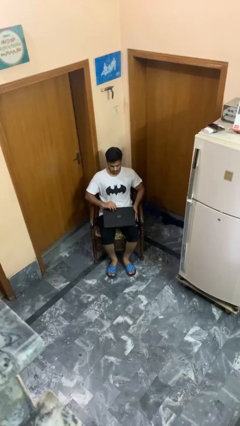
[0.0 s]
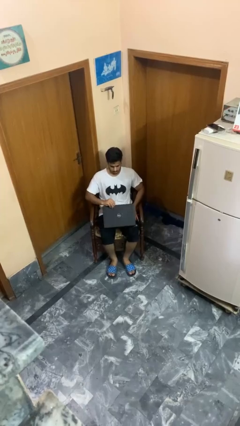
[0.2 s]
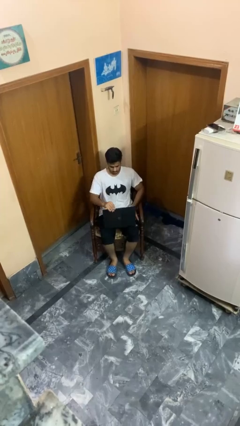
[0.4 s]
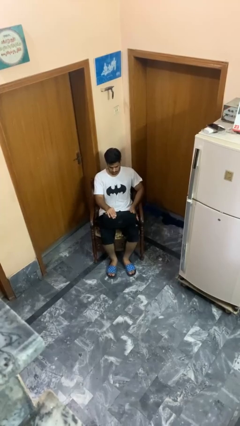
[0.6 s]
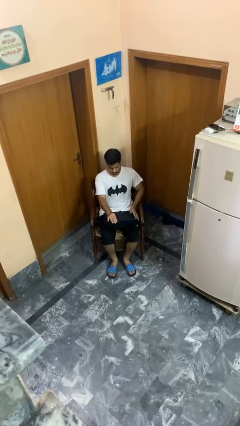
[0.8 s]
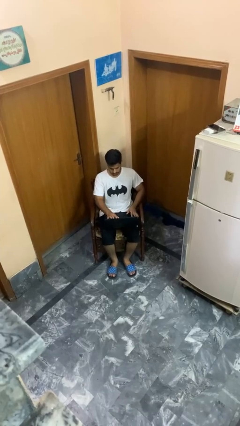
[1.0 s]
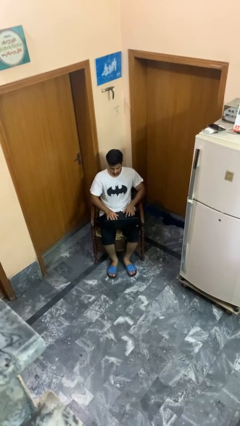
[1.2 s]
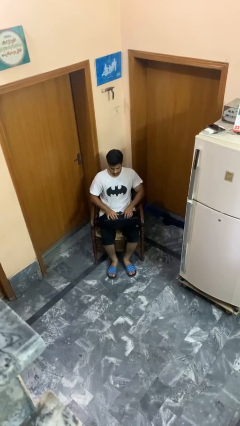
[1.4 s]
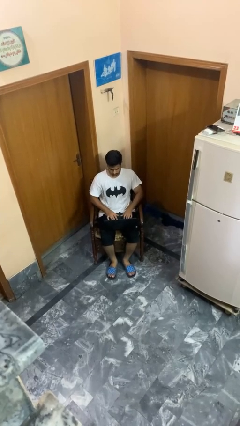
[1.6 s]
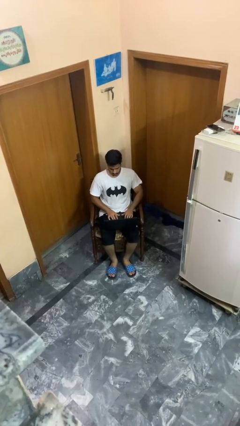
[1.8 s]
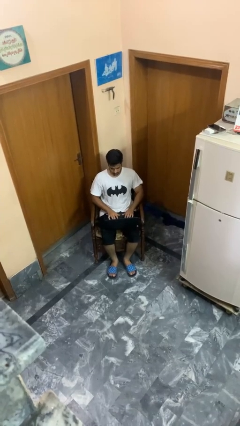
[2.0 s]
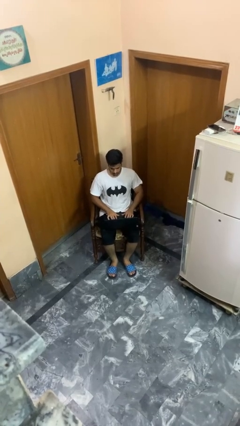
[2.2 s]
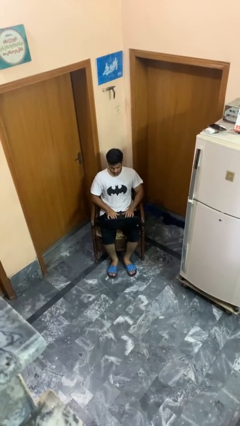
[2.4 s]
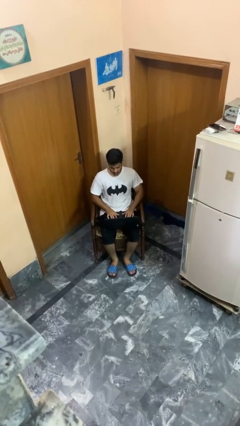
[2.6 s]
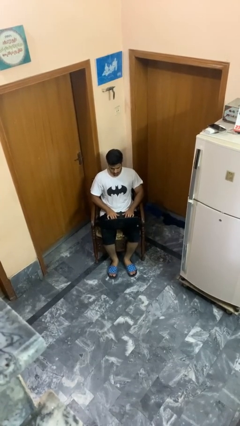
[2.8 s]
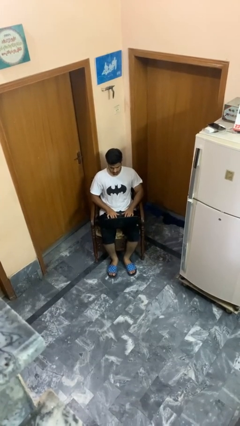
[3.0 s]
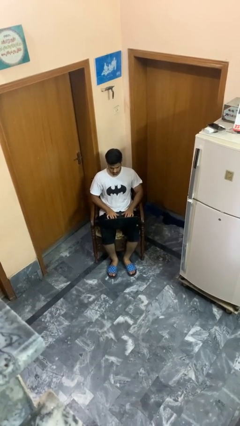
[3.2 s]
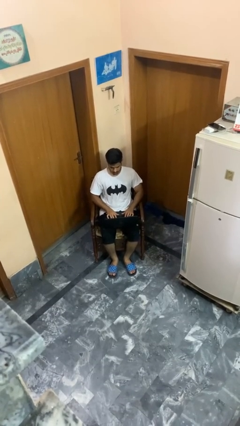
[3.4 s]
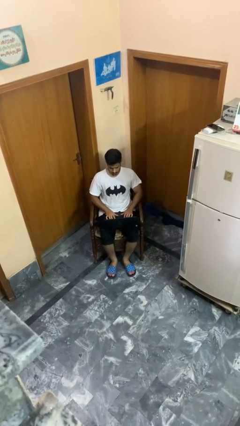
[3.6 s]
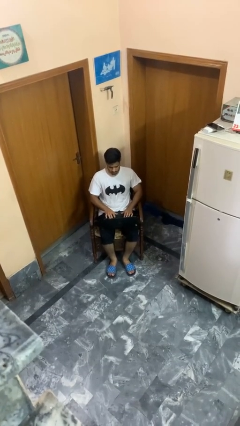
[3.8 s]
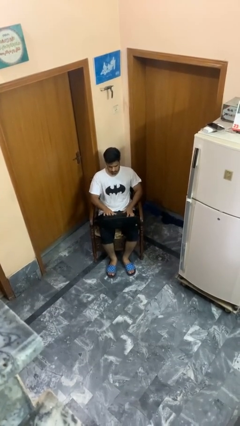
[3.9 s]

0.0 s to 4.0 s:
person opens laptop

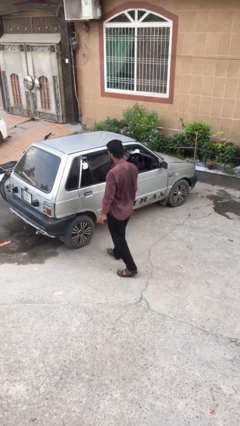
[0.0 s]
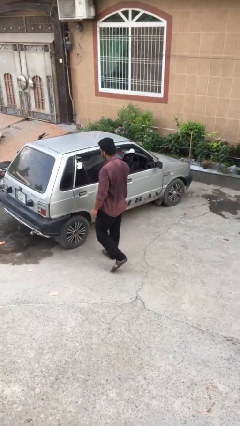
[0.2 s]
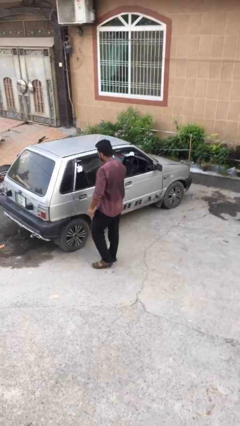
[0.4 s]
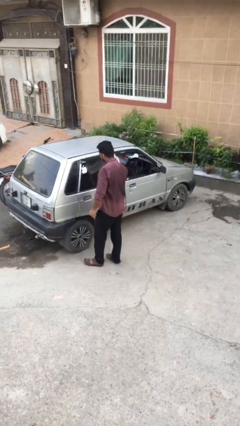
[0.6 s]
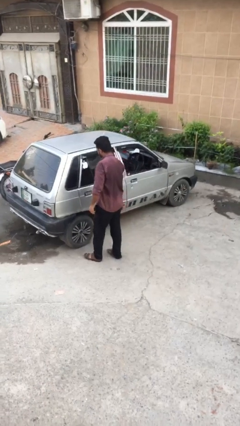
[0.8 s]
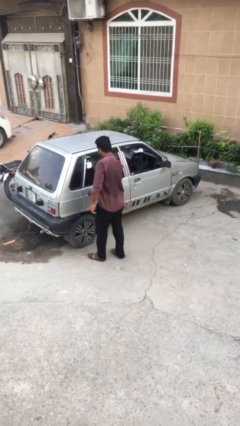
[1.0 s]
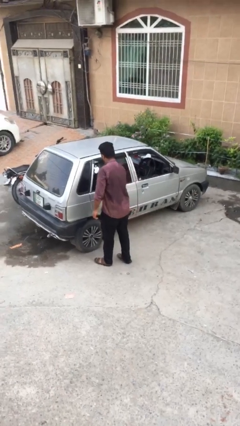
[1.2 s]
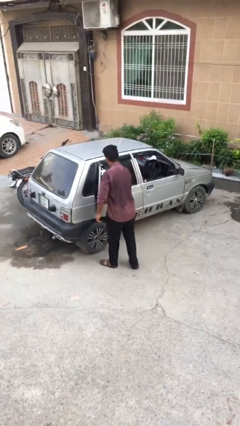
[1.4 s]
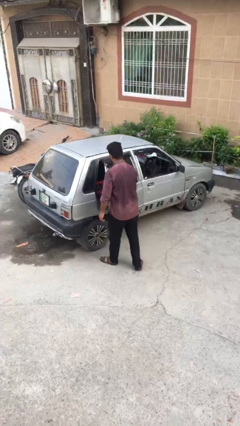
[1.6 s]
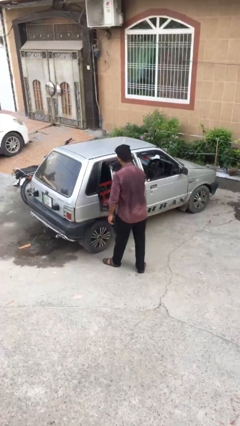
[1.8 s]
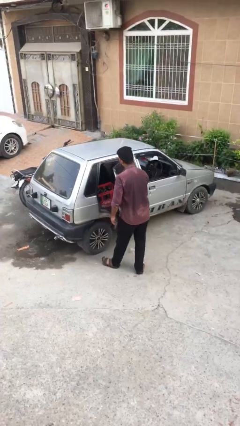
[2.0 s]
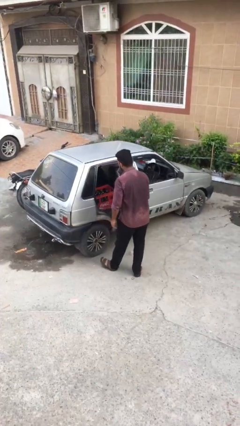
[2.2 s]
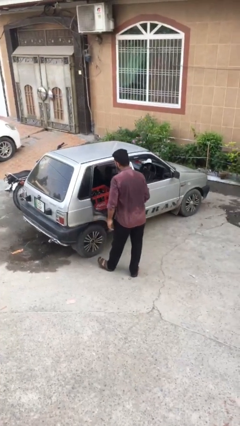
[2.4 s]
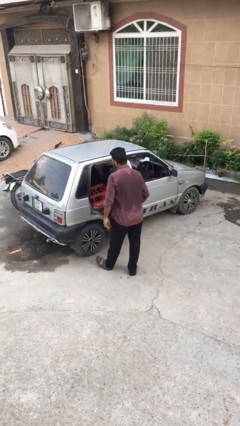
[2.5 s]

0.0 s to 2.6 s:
person opens car door

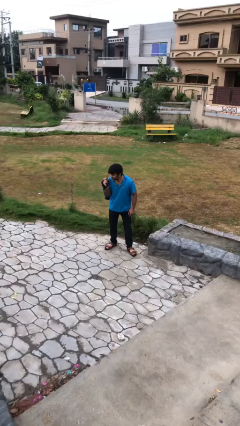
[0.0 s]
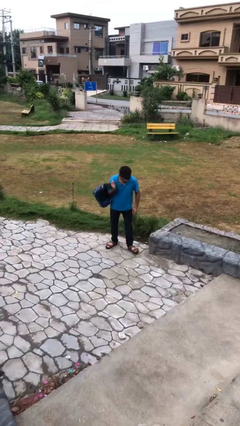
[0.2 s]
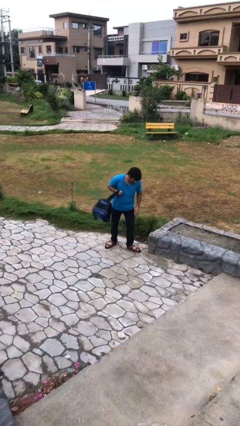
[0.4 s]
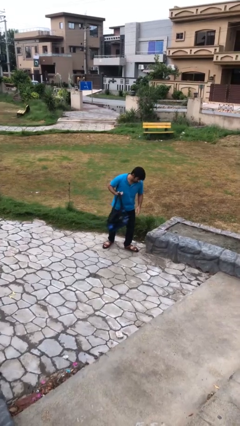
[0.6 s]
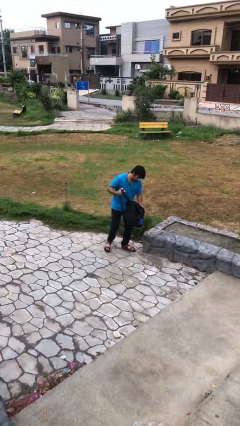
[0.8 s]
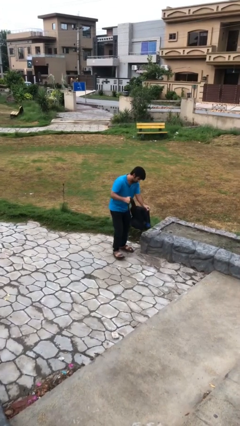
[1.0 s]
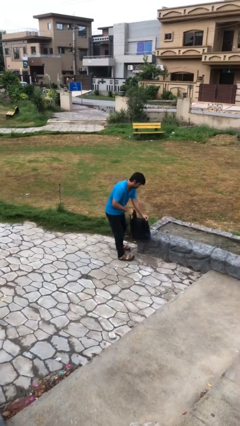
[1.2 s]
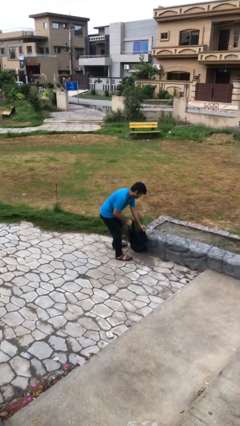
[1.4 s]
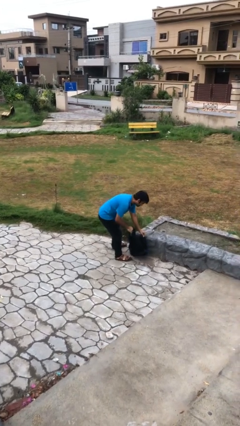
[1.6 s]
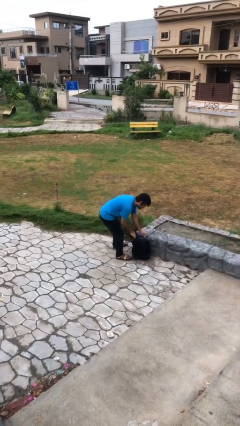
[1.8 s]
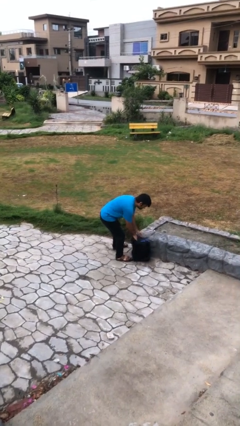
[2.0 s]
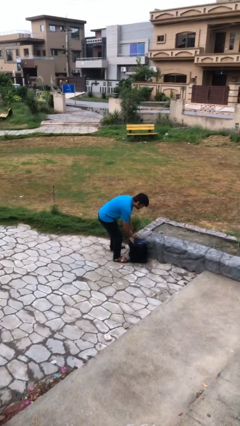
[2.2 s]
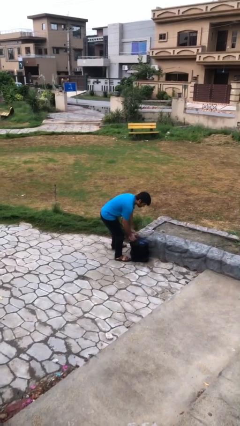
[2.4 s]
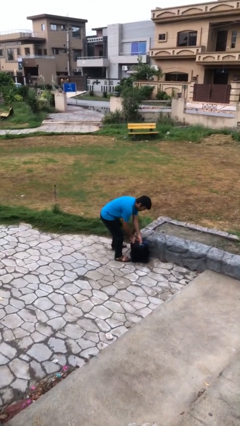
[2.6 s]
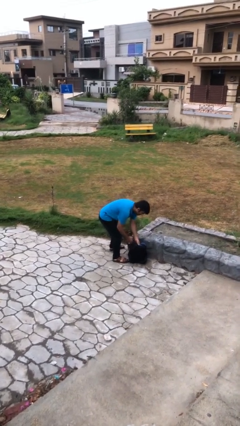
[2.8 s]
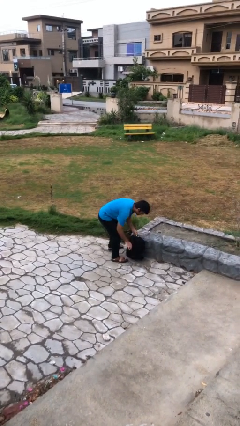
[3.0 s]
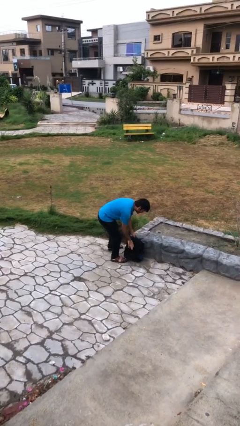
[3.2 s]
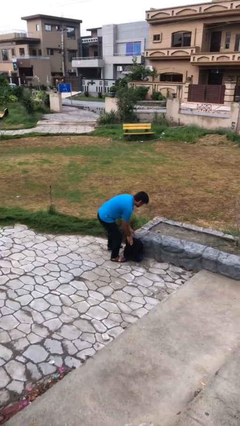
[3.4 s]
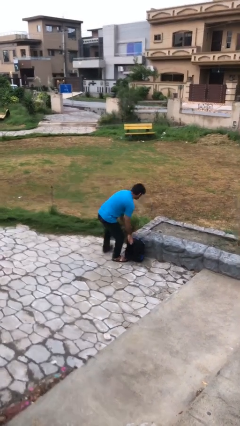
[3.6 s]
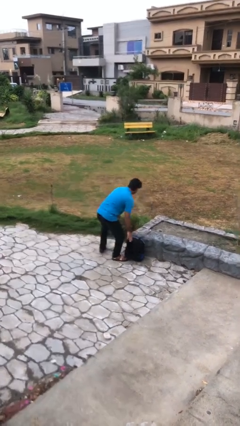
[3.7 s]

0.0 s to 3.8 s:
person puts down object on floor

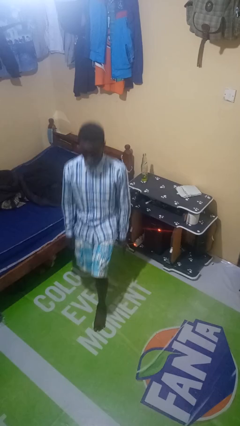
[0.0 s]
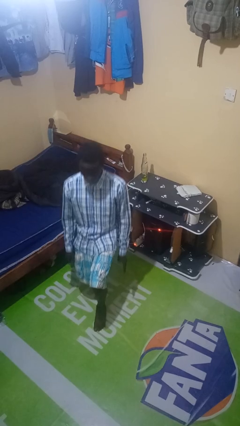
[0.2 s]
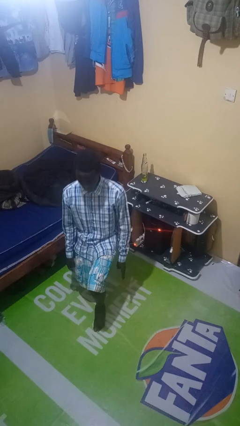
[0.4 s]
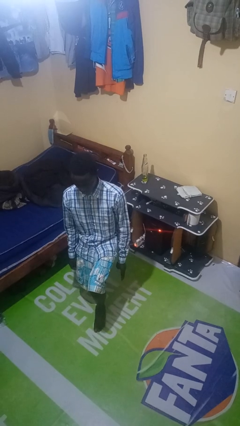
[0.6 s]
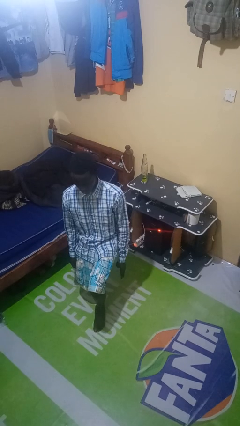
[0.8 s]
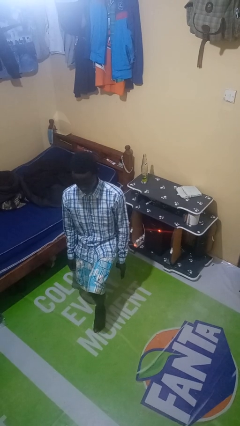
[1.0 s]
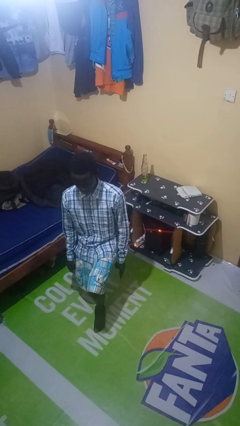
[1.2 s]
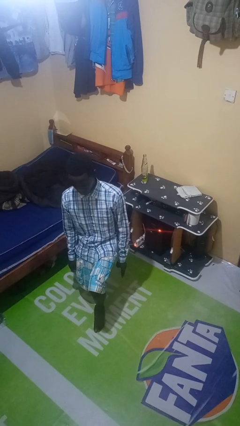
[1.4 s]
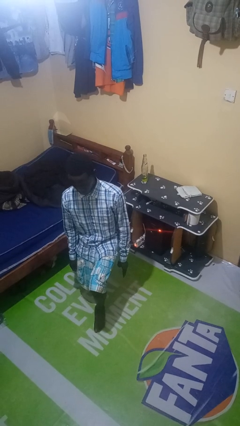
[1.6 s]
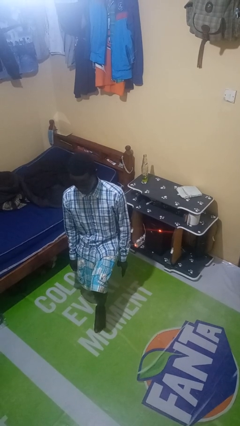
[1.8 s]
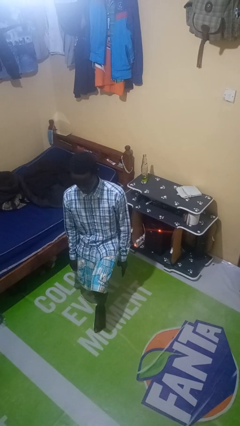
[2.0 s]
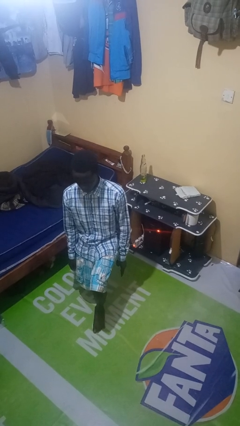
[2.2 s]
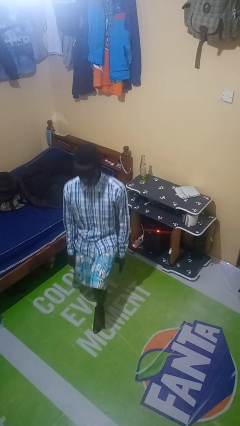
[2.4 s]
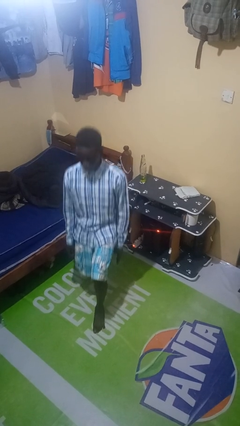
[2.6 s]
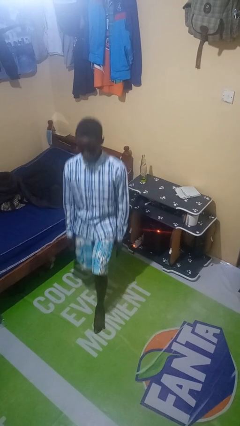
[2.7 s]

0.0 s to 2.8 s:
person exercises with lunges

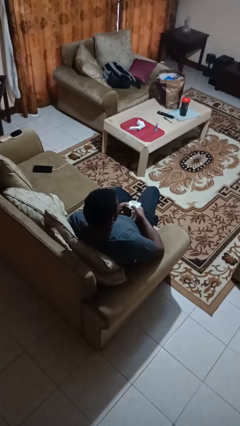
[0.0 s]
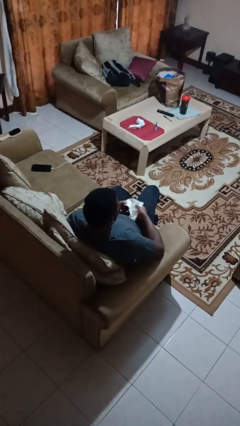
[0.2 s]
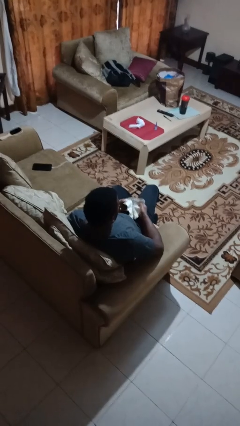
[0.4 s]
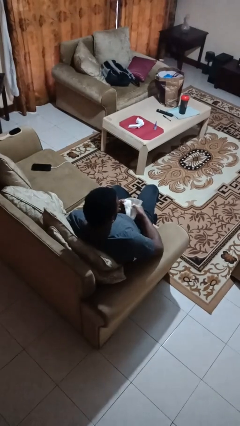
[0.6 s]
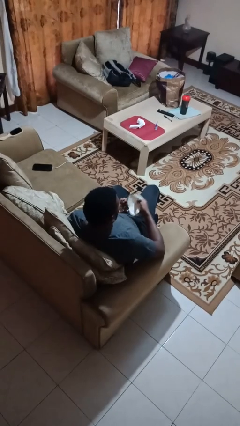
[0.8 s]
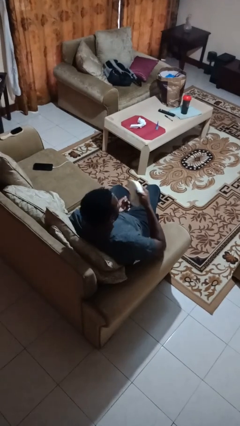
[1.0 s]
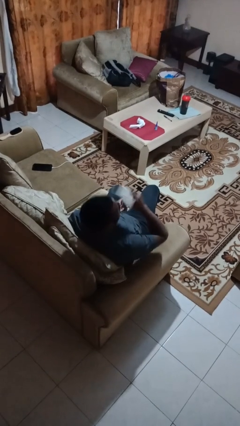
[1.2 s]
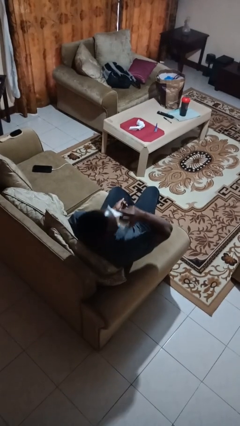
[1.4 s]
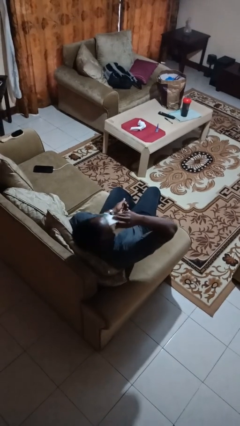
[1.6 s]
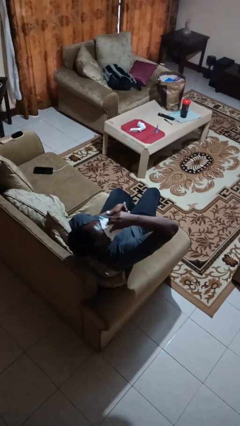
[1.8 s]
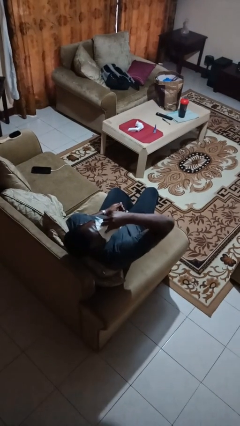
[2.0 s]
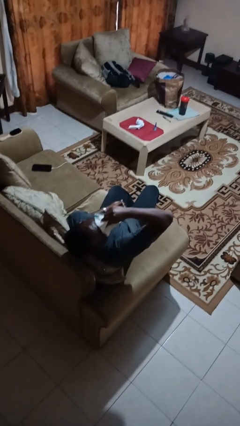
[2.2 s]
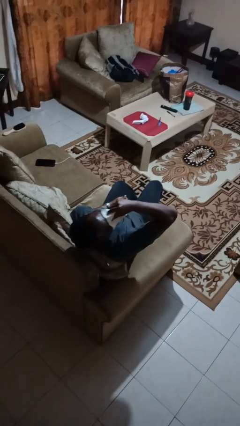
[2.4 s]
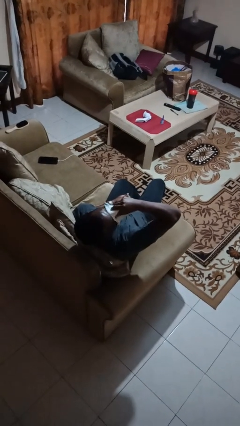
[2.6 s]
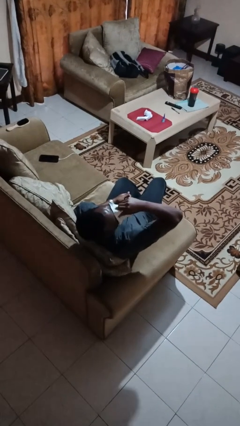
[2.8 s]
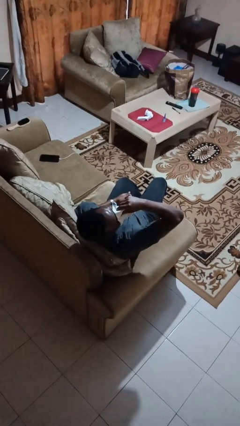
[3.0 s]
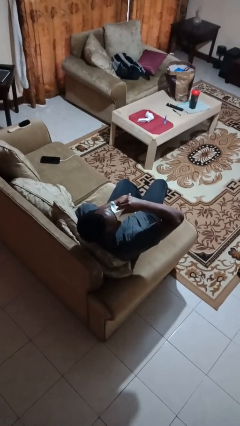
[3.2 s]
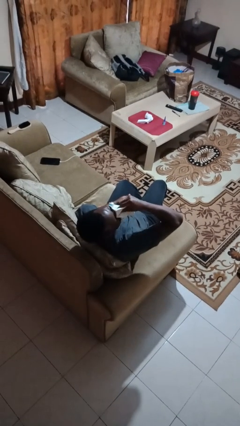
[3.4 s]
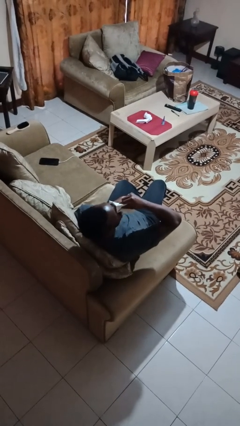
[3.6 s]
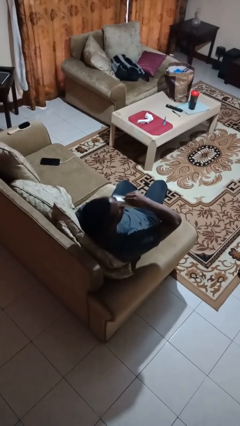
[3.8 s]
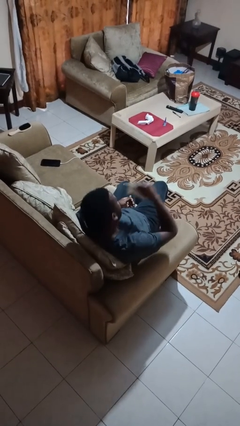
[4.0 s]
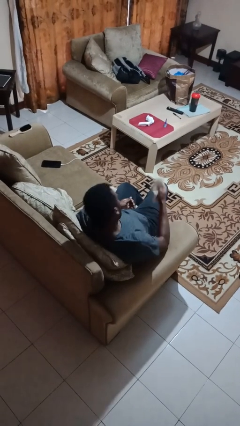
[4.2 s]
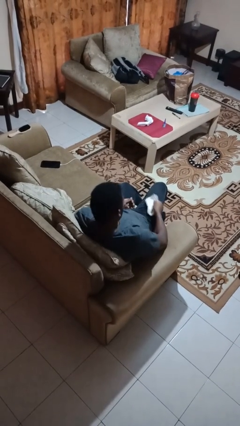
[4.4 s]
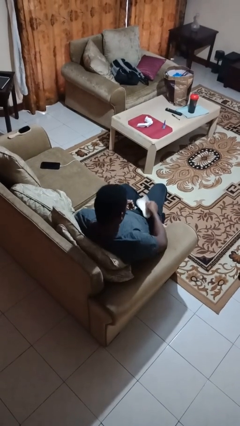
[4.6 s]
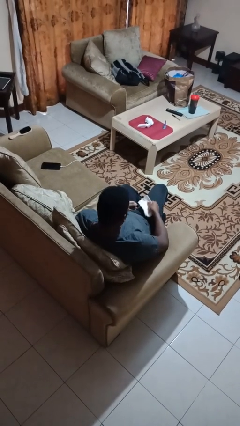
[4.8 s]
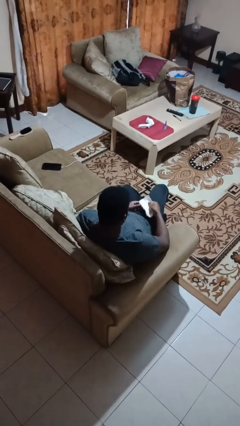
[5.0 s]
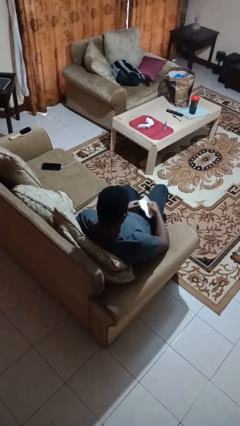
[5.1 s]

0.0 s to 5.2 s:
person blows nose
